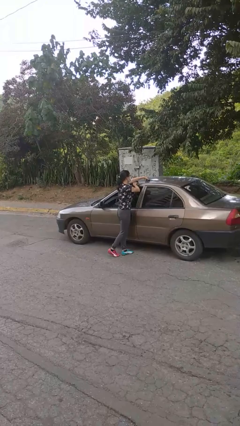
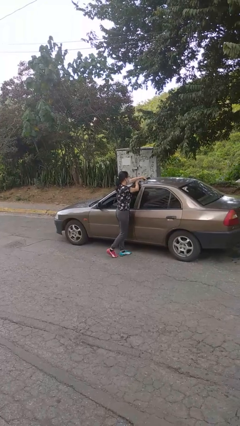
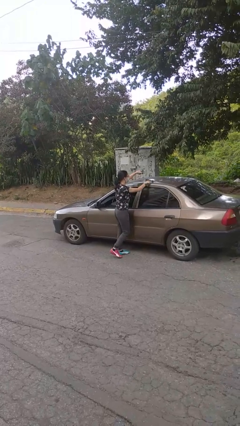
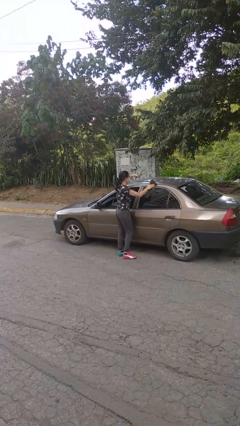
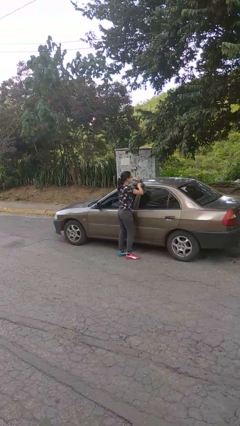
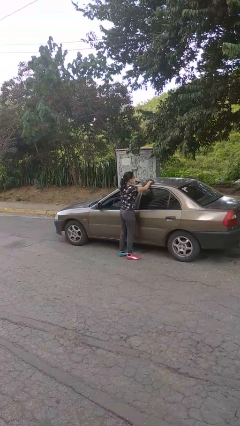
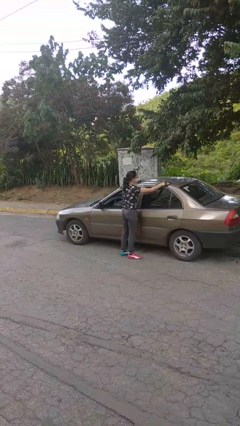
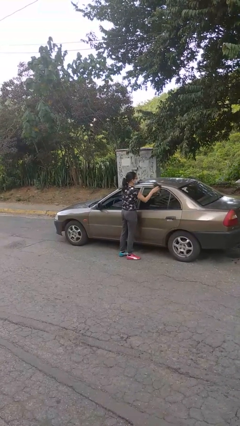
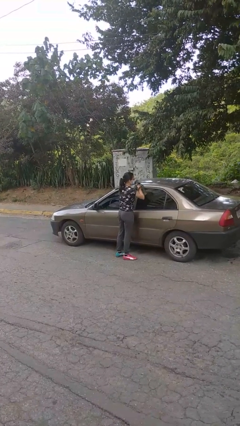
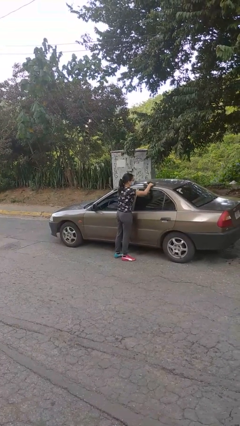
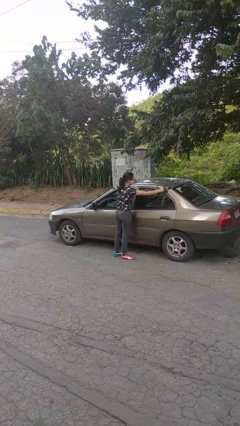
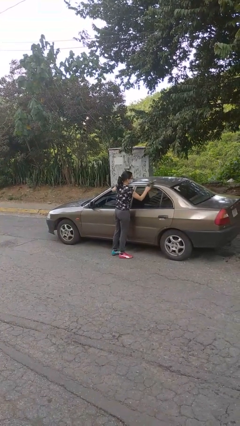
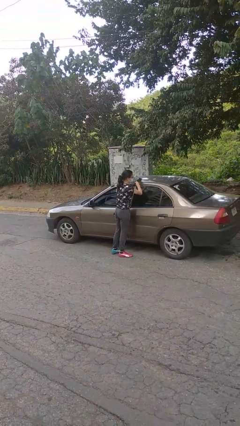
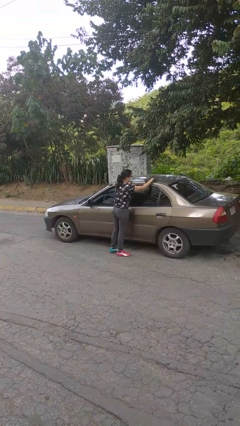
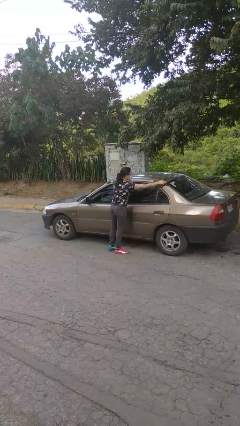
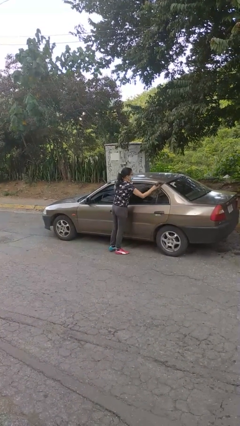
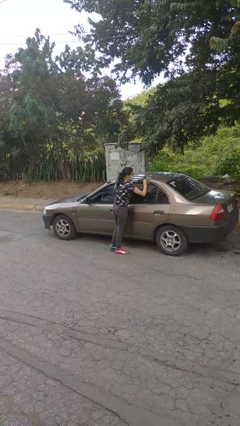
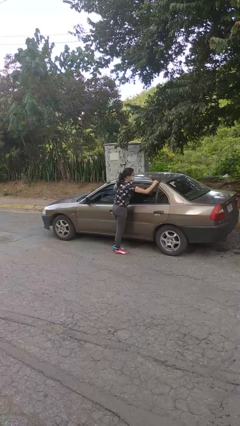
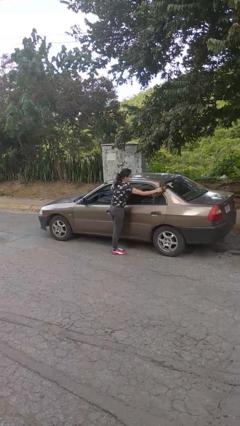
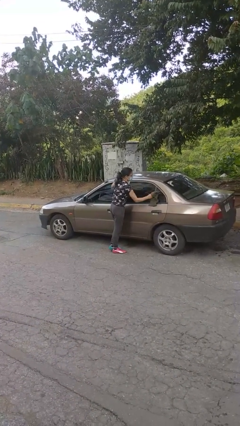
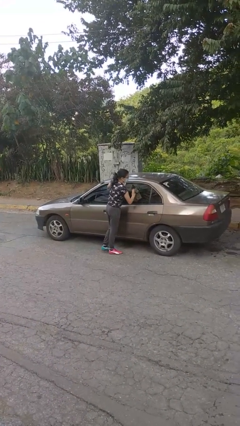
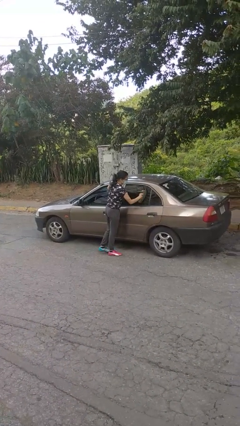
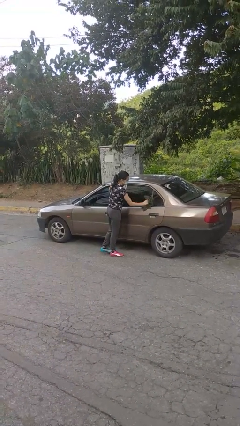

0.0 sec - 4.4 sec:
person polishes car with rag

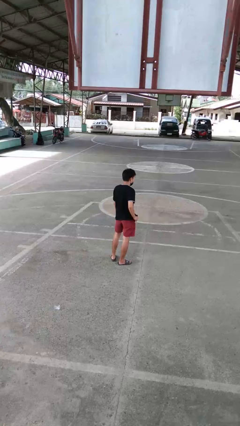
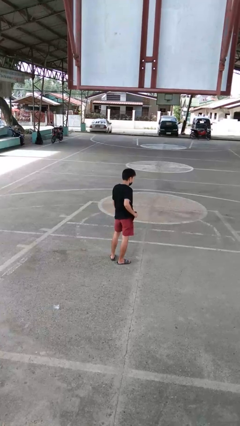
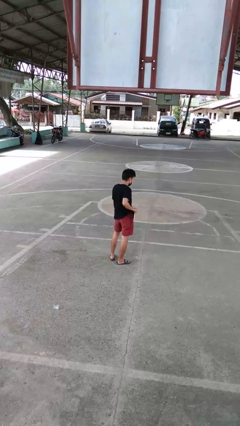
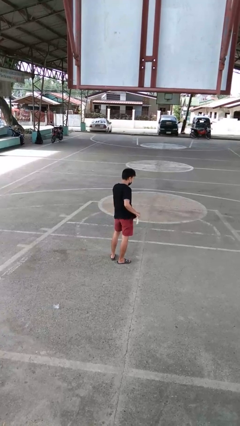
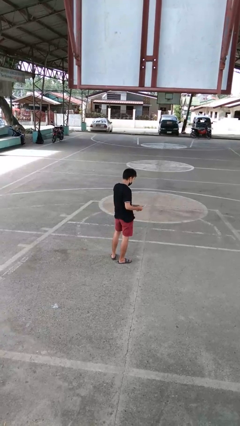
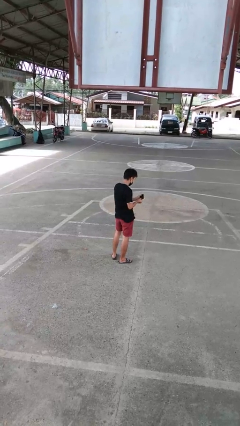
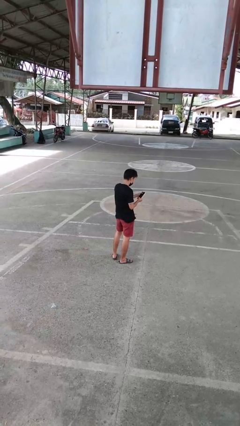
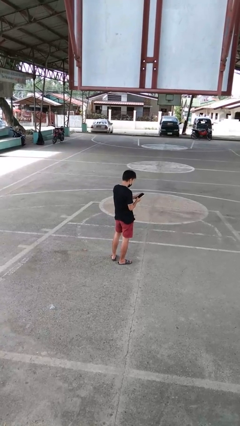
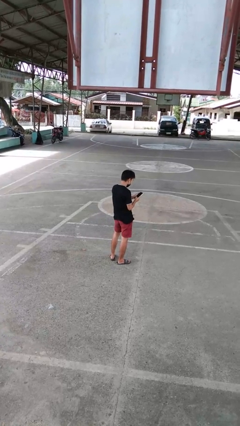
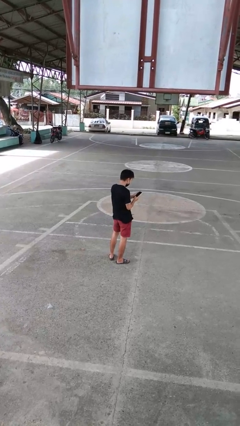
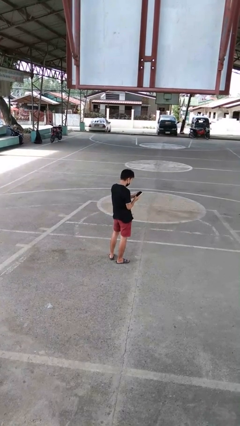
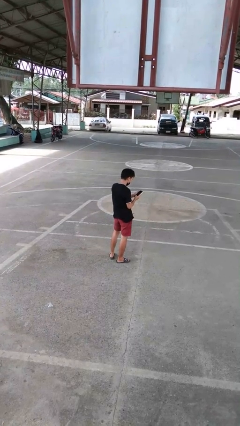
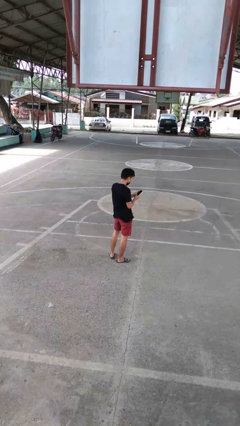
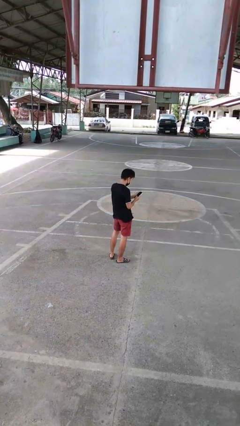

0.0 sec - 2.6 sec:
person takes phone from pocket

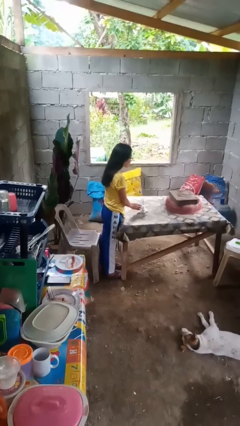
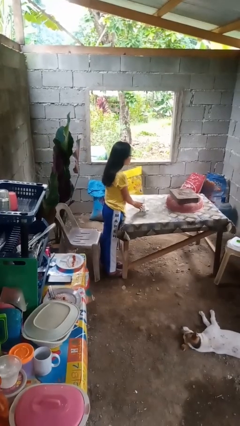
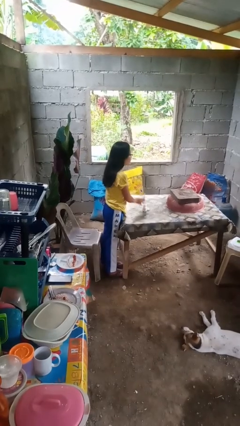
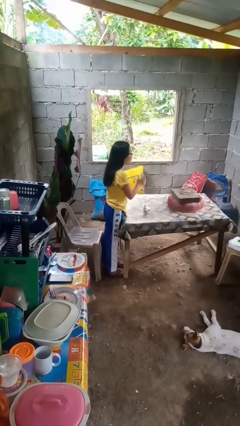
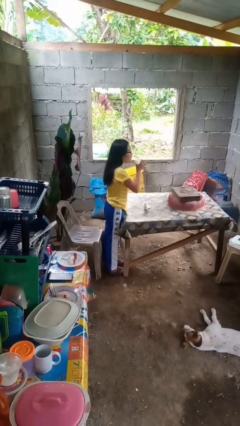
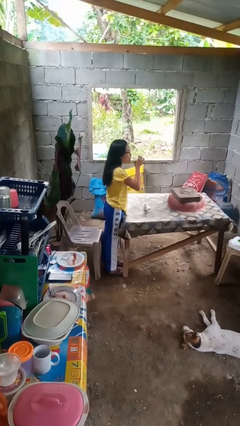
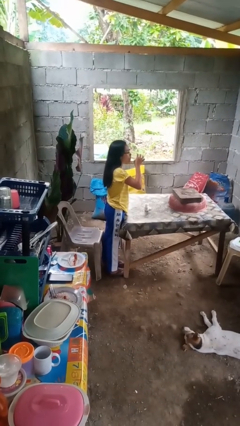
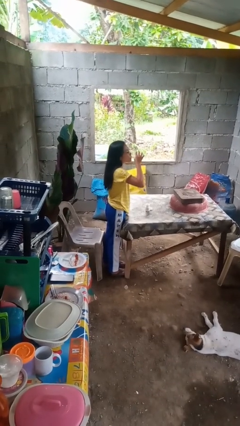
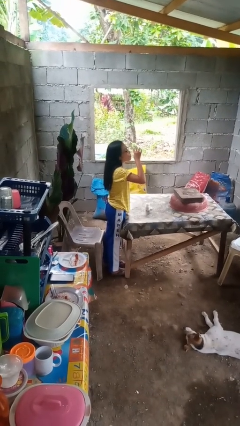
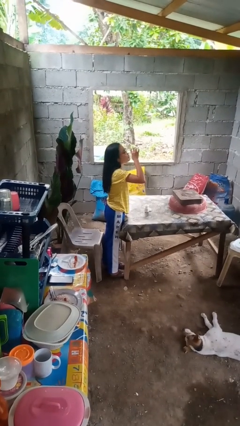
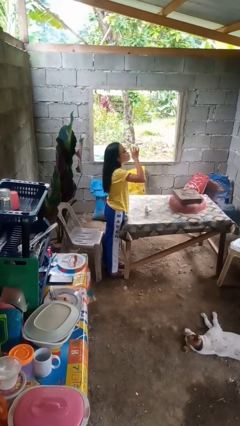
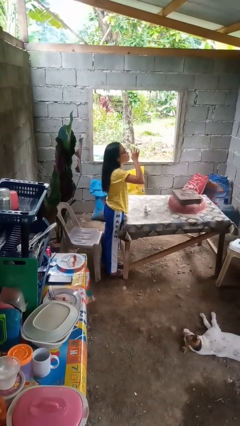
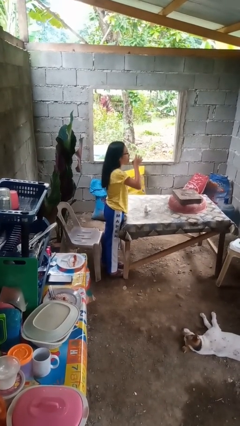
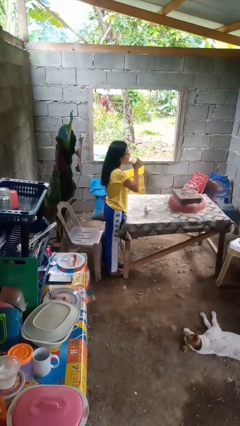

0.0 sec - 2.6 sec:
person drinks from cup

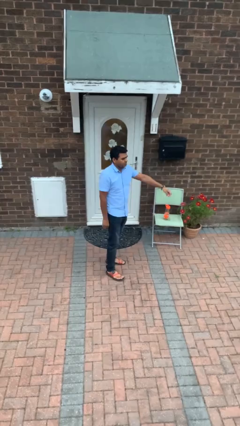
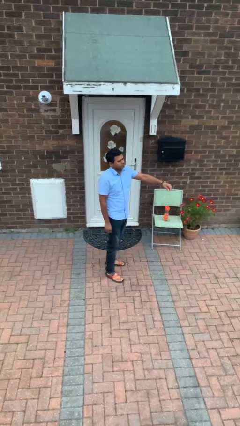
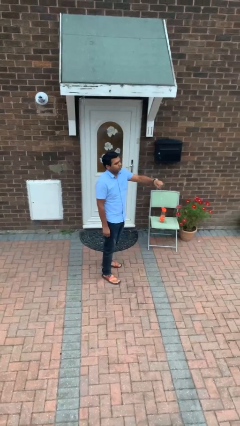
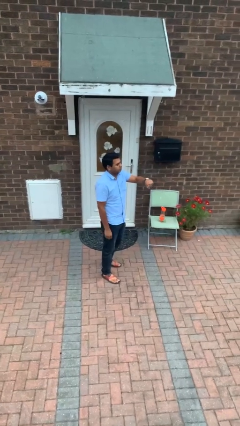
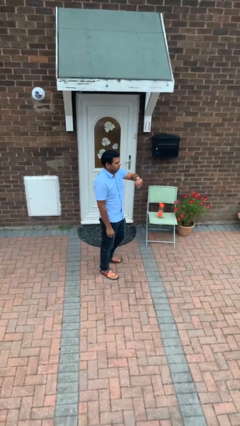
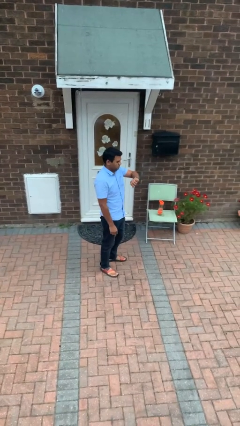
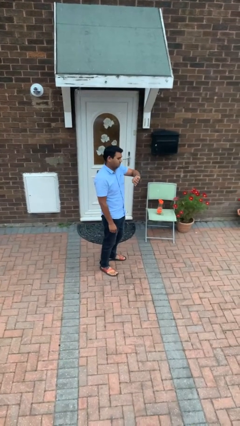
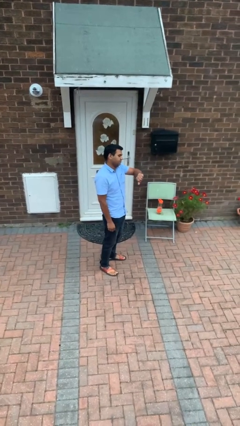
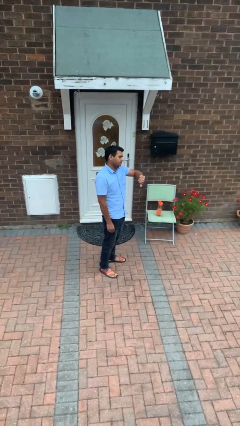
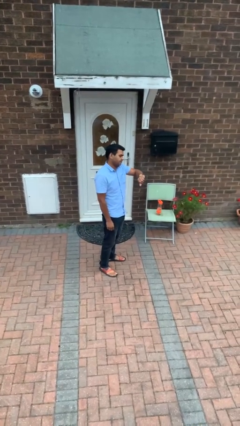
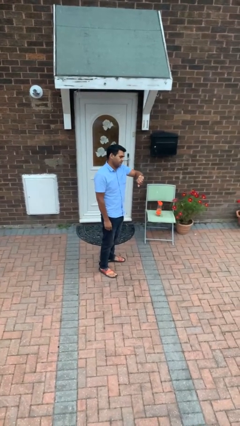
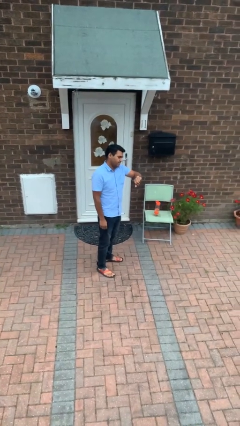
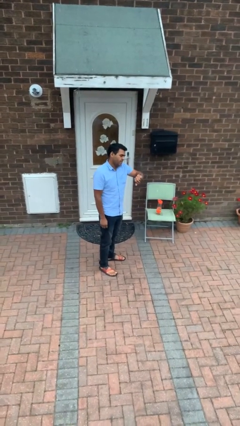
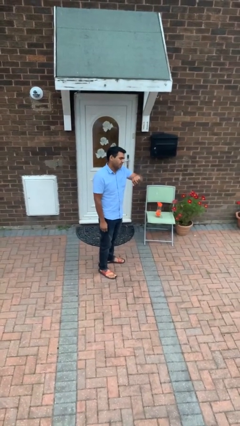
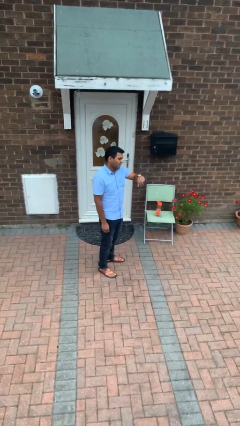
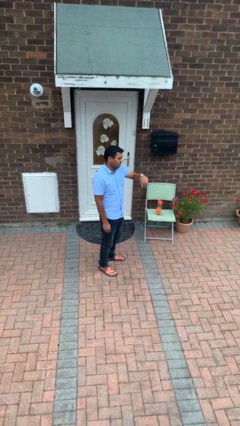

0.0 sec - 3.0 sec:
person looks at wristwatch

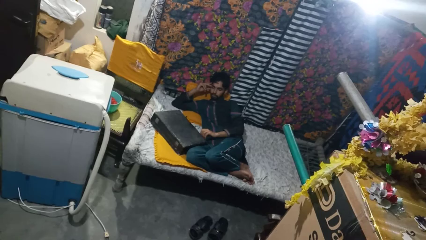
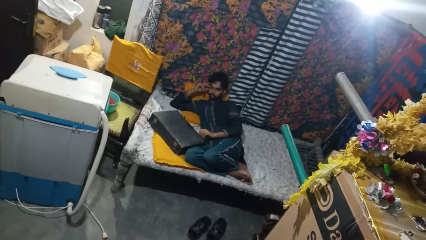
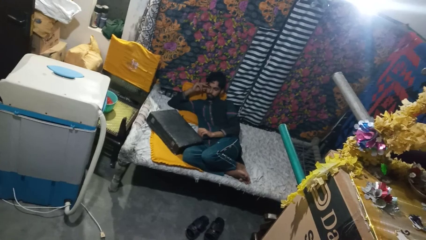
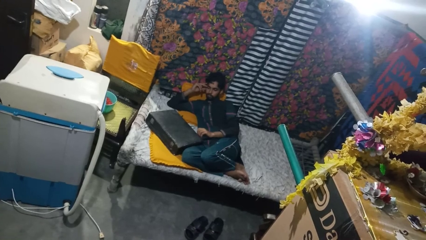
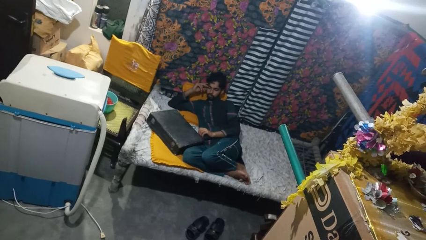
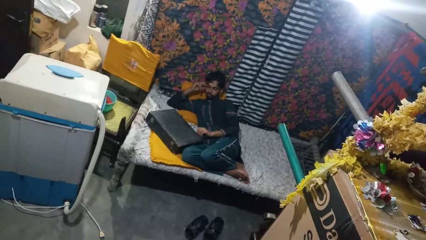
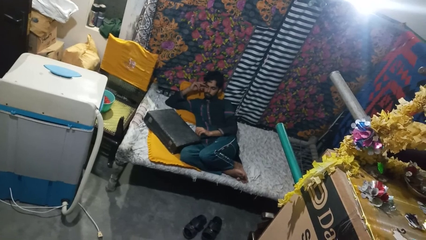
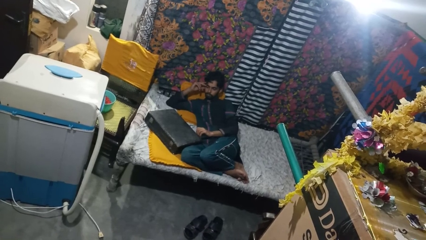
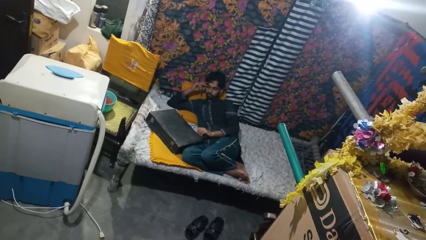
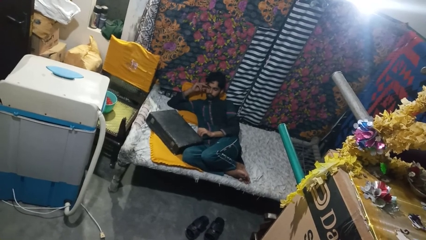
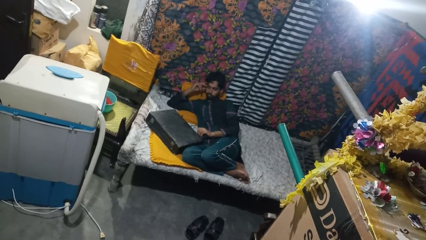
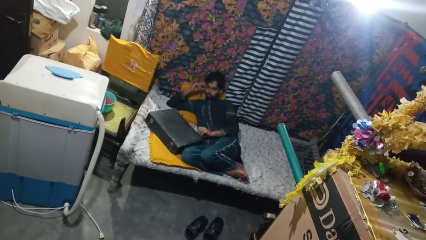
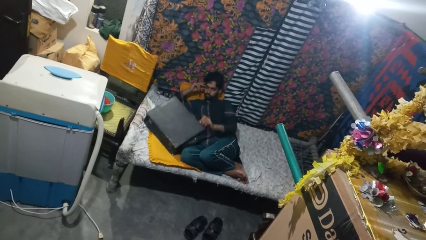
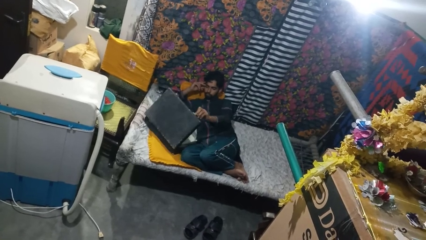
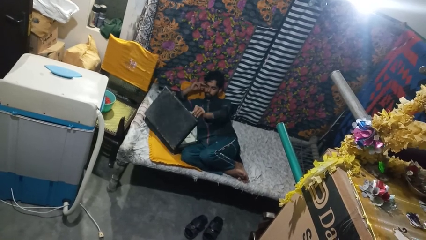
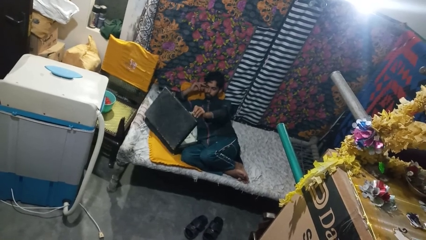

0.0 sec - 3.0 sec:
person opens suitcase

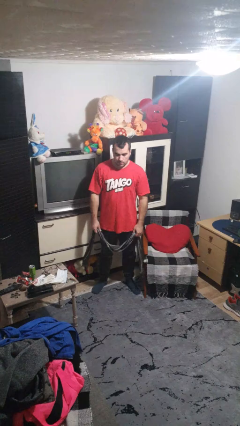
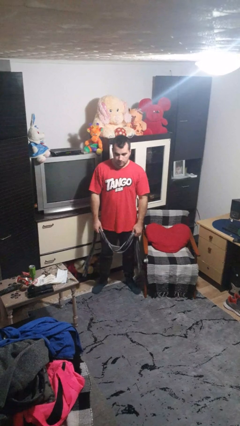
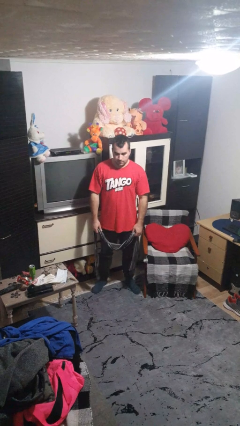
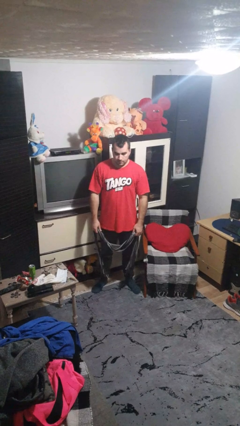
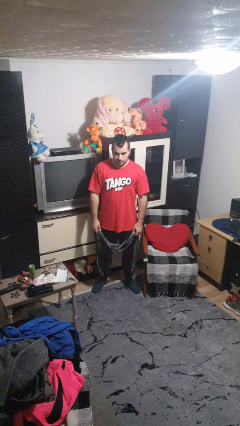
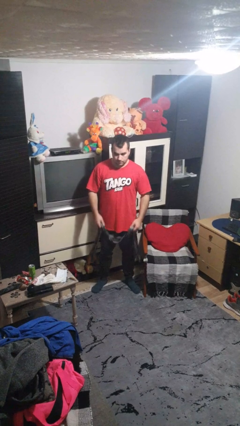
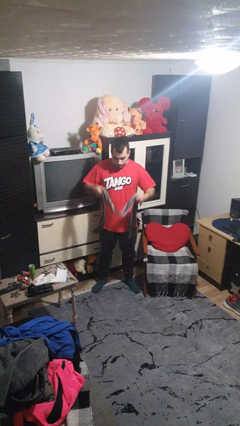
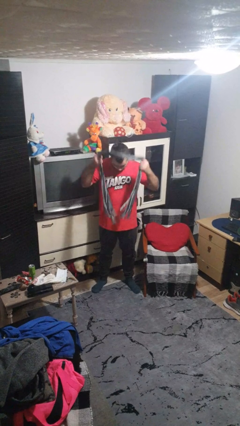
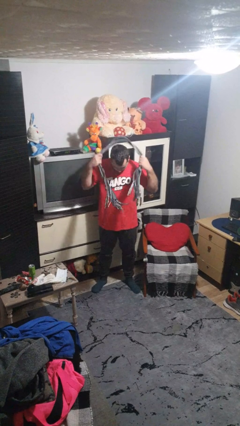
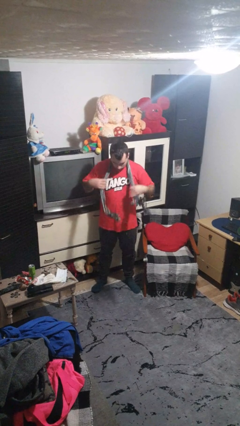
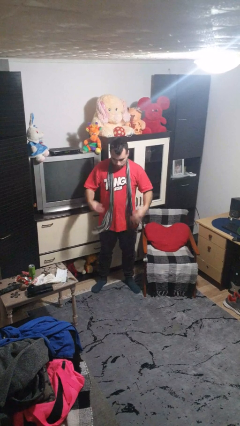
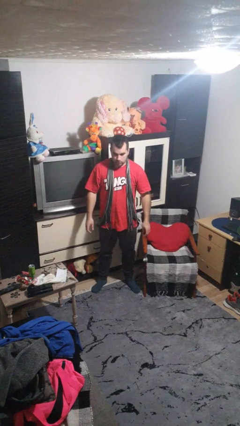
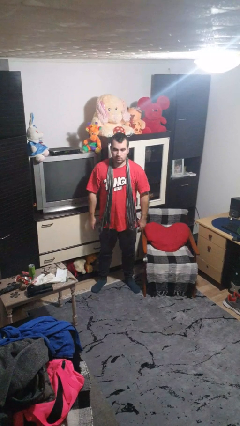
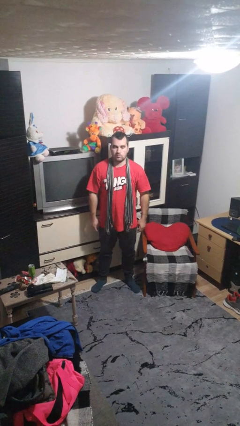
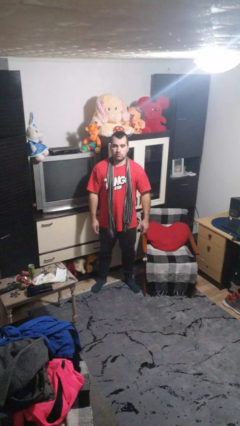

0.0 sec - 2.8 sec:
person puts on scarf
